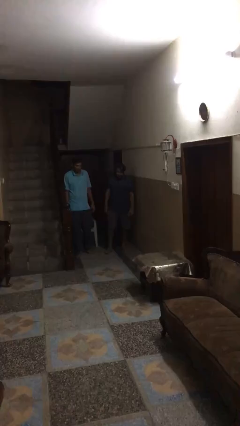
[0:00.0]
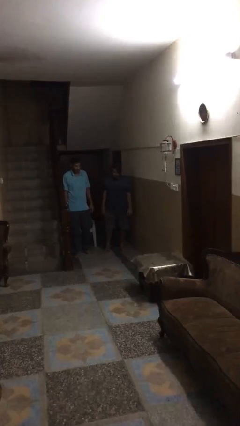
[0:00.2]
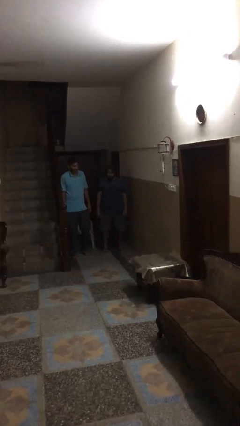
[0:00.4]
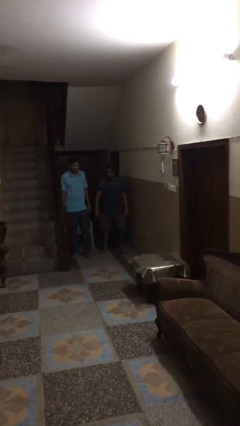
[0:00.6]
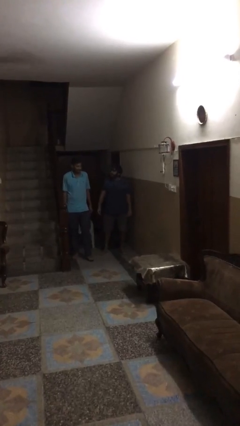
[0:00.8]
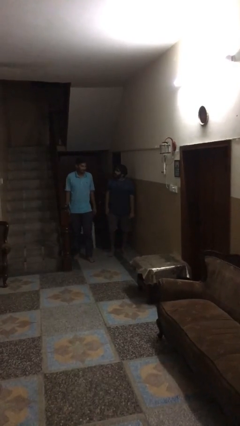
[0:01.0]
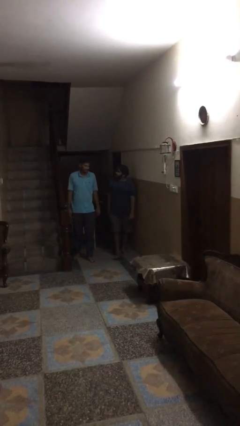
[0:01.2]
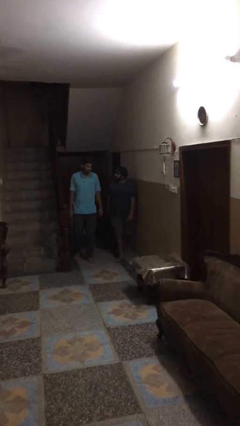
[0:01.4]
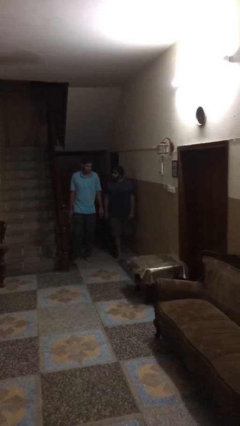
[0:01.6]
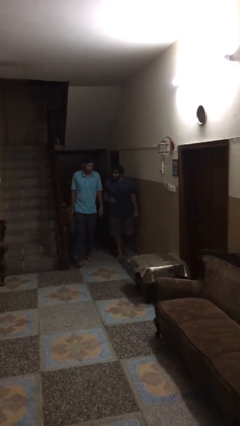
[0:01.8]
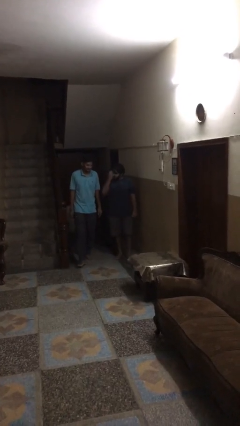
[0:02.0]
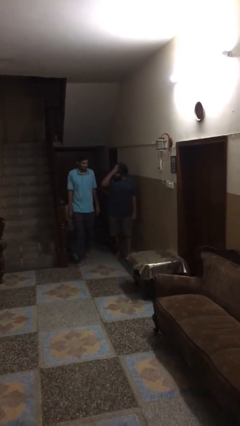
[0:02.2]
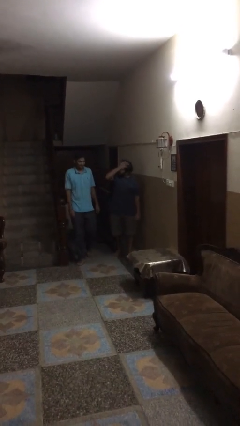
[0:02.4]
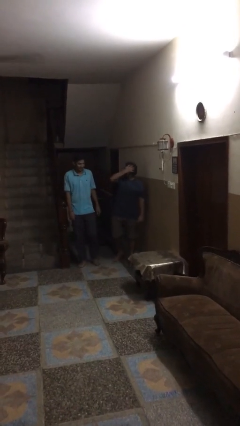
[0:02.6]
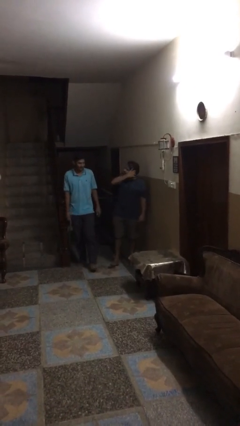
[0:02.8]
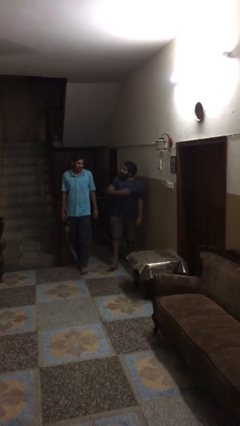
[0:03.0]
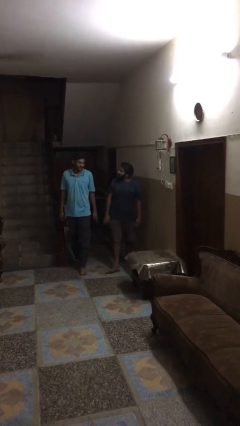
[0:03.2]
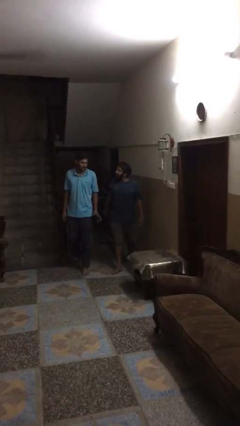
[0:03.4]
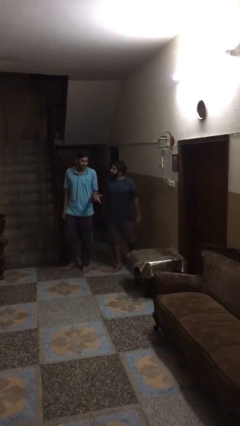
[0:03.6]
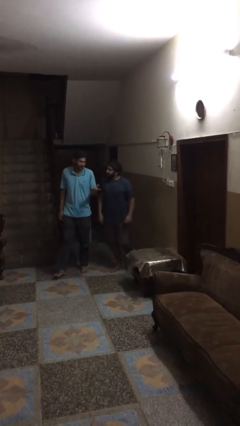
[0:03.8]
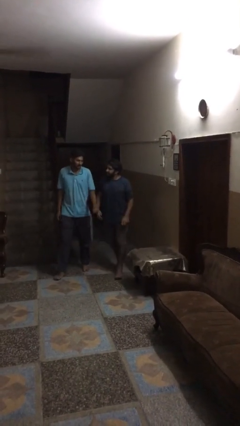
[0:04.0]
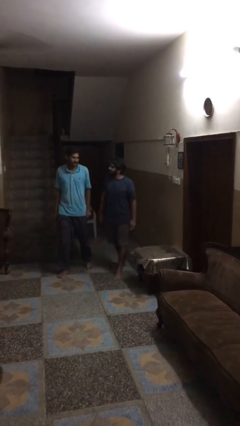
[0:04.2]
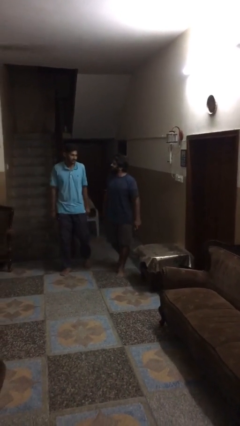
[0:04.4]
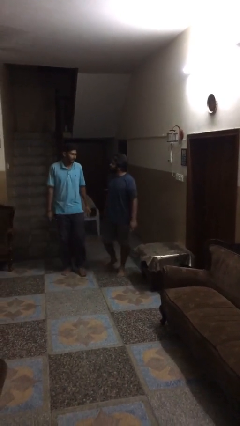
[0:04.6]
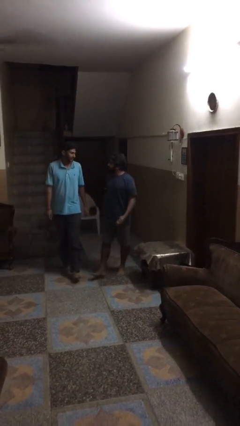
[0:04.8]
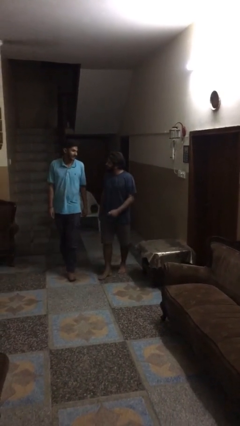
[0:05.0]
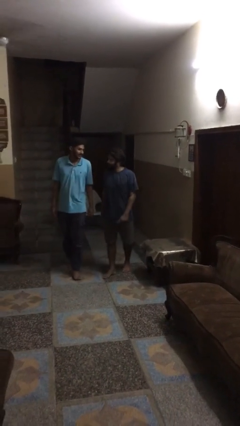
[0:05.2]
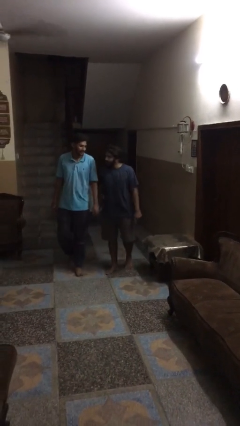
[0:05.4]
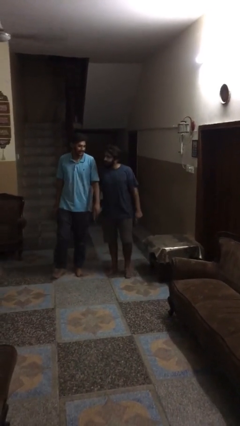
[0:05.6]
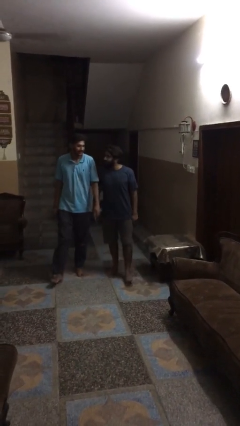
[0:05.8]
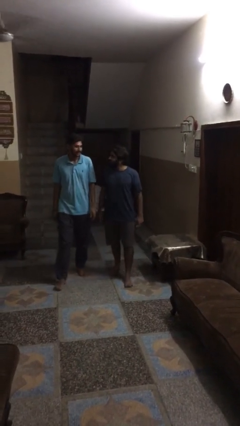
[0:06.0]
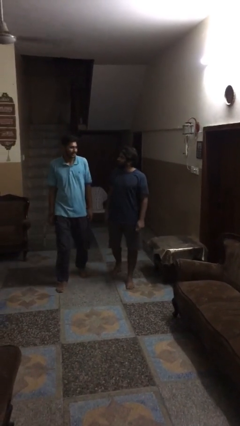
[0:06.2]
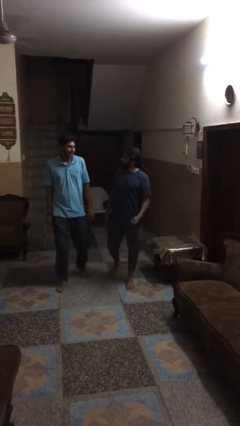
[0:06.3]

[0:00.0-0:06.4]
person talks to person

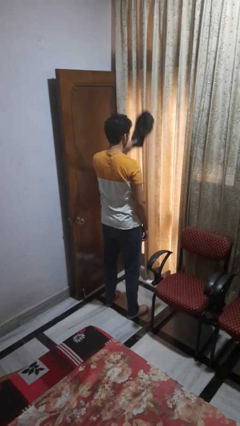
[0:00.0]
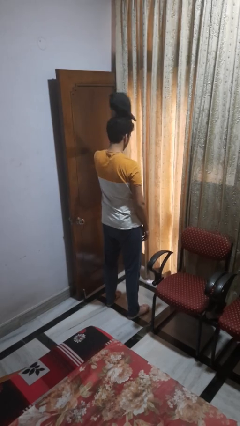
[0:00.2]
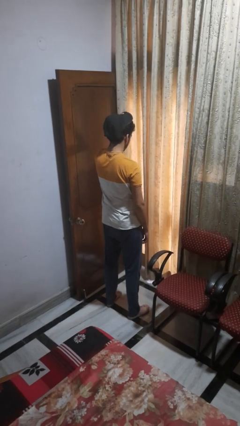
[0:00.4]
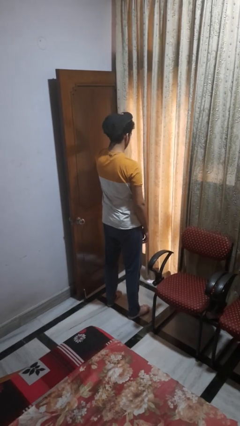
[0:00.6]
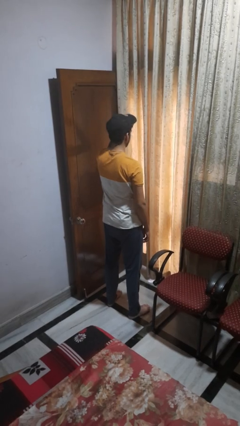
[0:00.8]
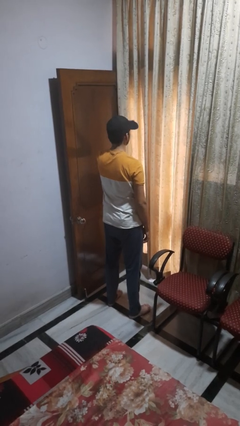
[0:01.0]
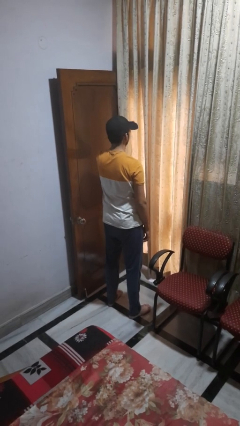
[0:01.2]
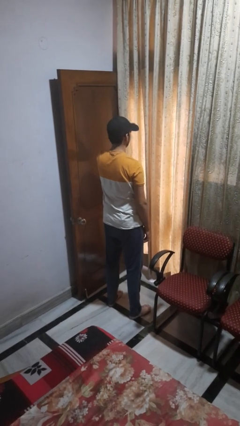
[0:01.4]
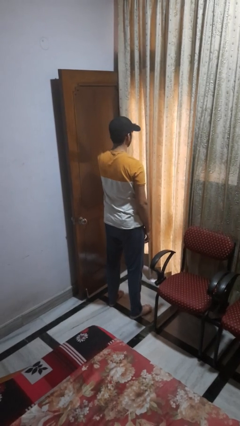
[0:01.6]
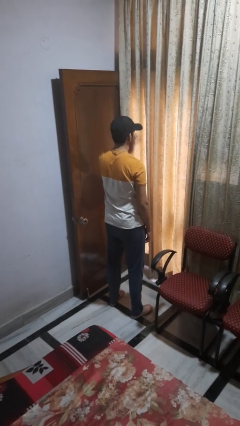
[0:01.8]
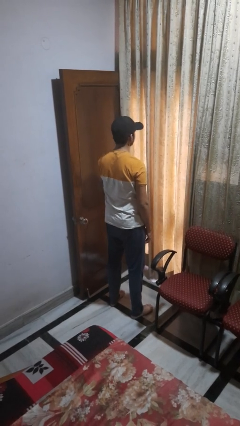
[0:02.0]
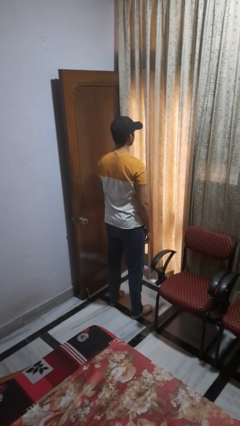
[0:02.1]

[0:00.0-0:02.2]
person puts on hat

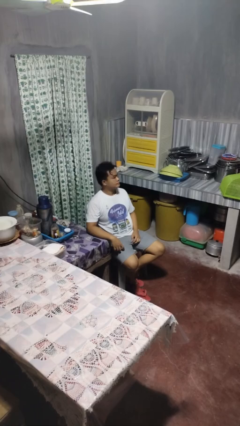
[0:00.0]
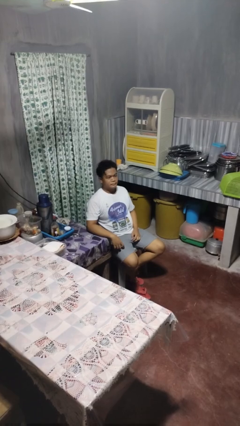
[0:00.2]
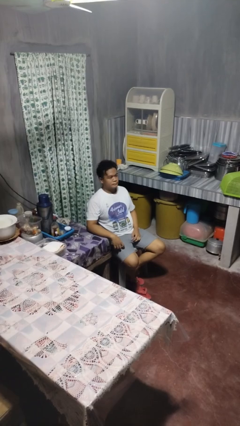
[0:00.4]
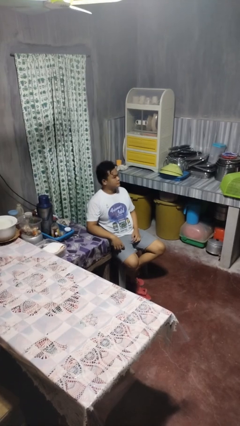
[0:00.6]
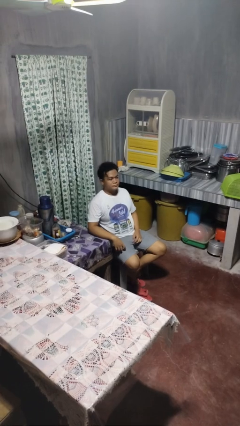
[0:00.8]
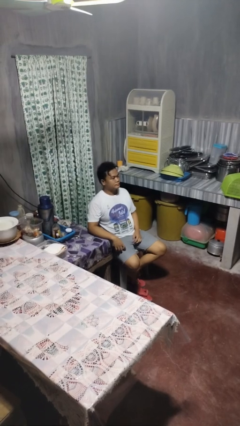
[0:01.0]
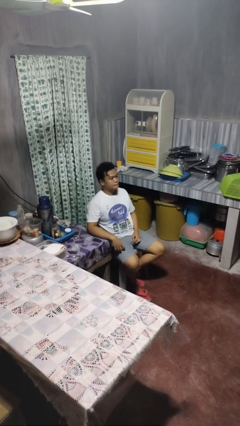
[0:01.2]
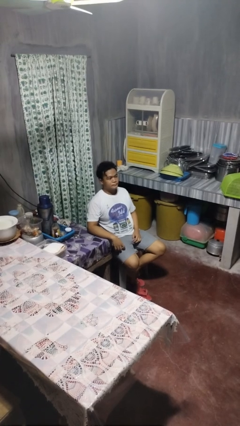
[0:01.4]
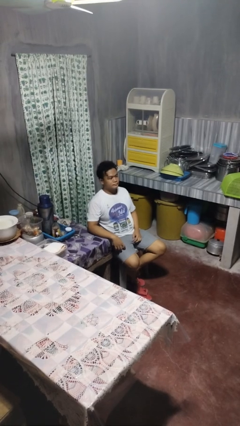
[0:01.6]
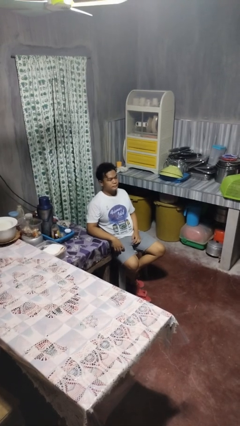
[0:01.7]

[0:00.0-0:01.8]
person shakes head

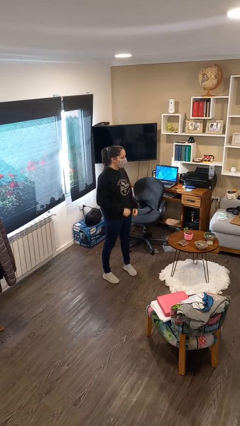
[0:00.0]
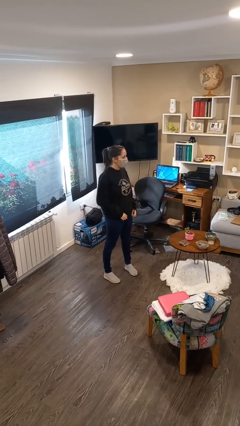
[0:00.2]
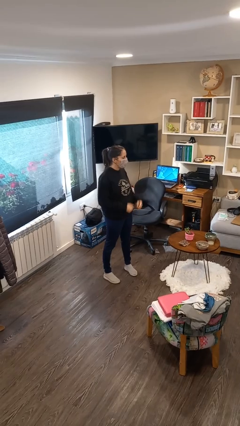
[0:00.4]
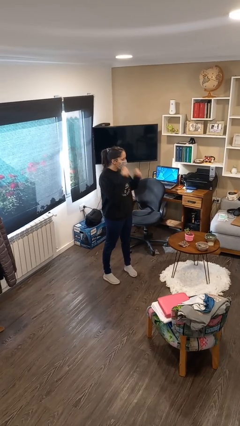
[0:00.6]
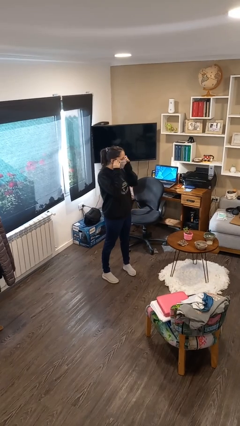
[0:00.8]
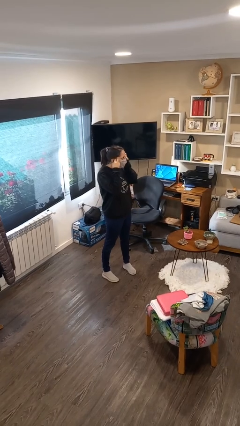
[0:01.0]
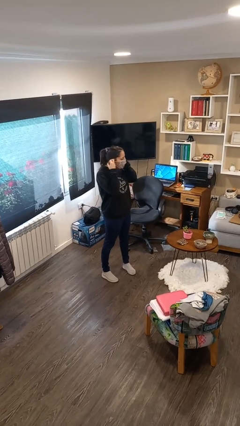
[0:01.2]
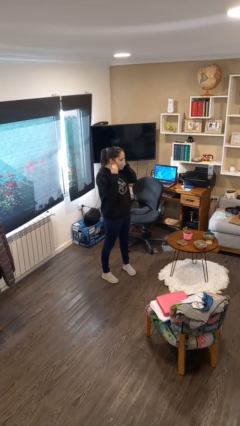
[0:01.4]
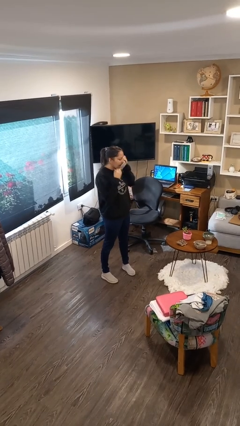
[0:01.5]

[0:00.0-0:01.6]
person takes off facemask

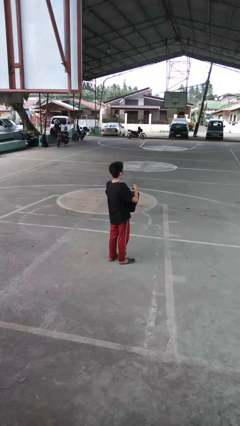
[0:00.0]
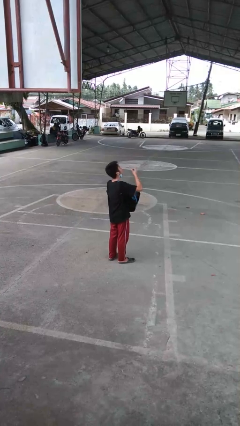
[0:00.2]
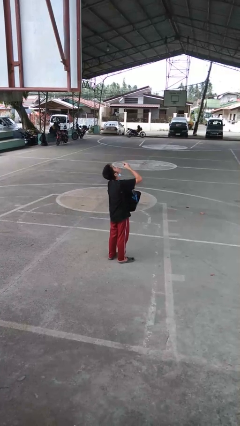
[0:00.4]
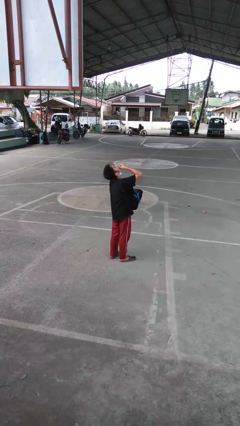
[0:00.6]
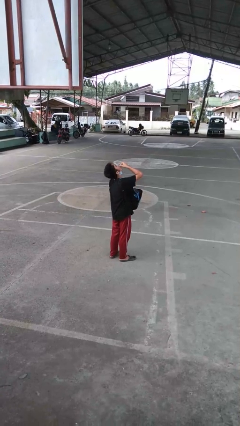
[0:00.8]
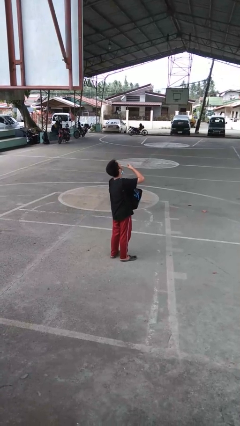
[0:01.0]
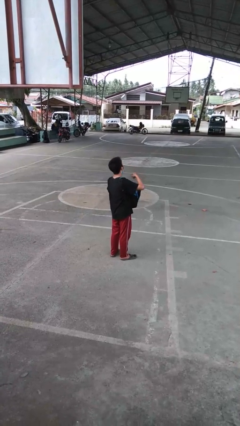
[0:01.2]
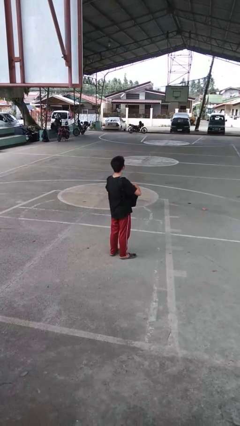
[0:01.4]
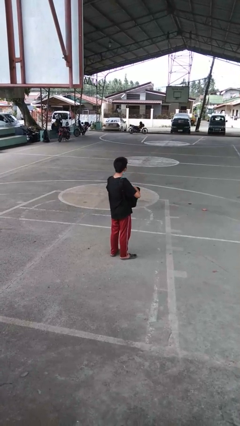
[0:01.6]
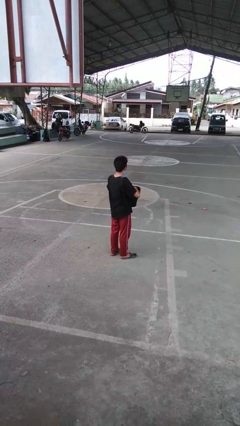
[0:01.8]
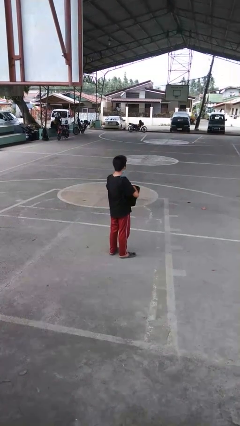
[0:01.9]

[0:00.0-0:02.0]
person eats snack from bag

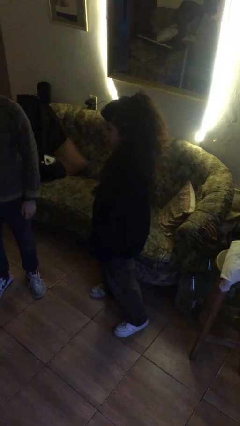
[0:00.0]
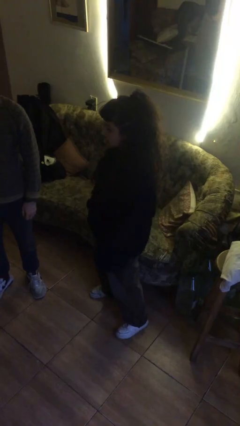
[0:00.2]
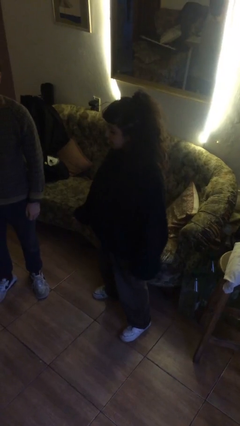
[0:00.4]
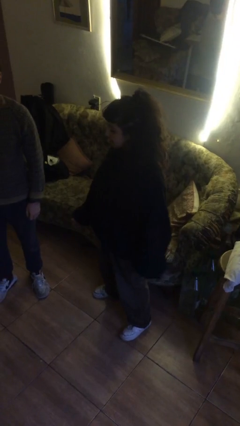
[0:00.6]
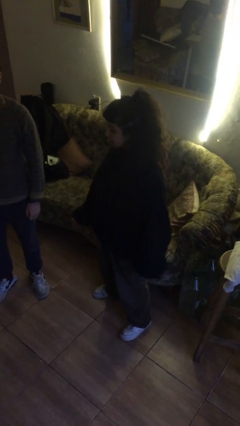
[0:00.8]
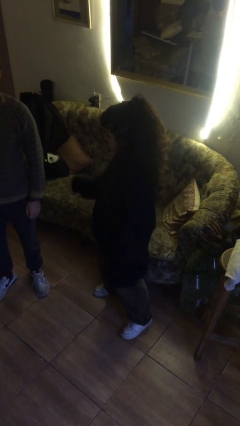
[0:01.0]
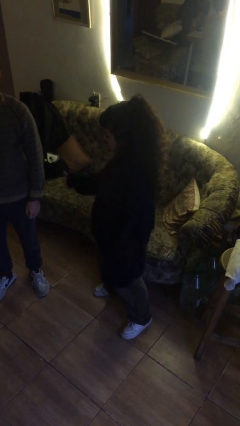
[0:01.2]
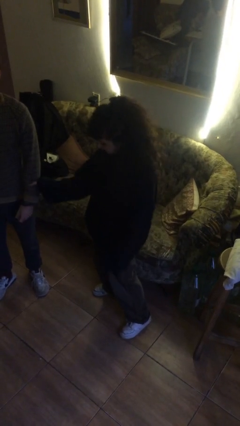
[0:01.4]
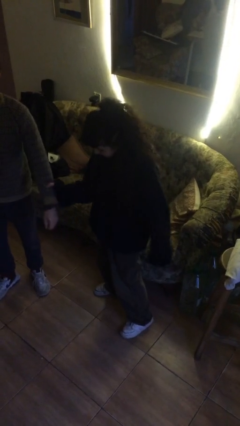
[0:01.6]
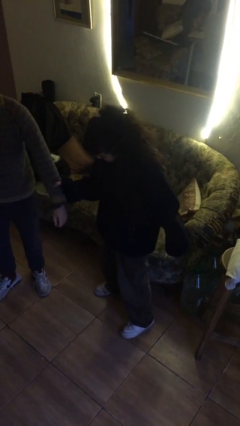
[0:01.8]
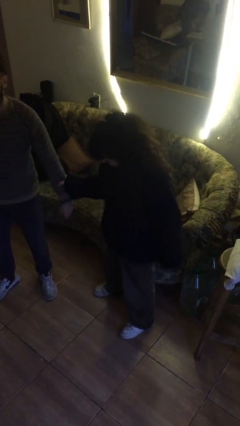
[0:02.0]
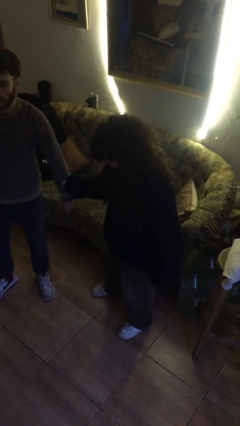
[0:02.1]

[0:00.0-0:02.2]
person grabs person by forearm

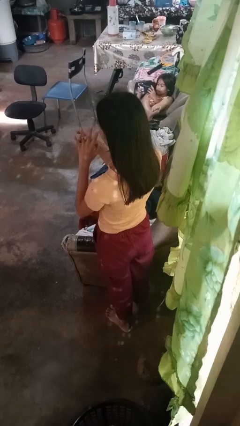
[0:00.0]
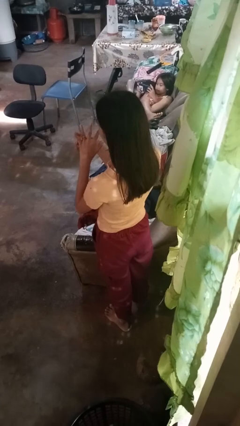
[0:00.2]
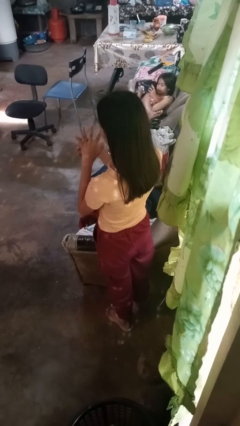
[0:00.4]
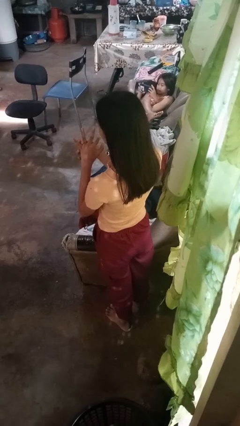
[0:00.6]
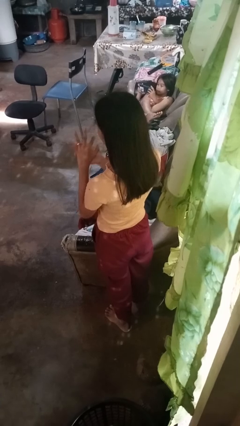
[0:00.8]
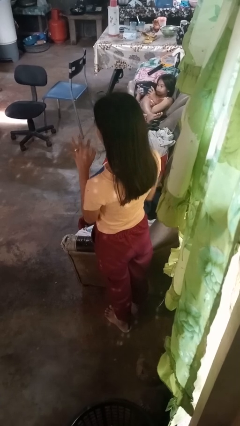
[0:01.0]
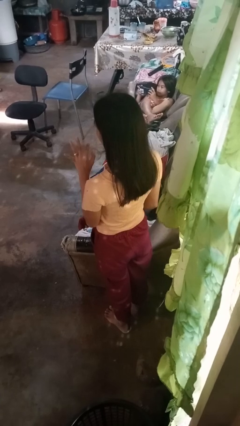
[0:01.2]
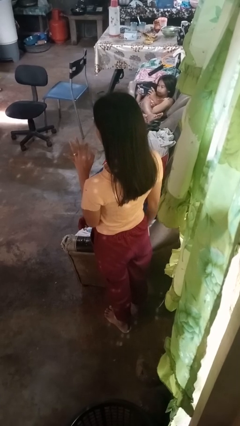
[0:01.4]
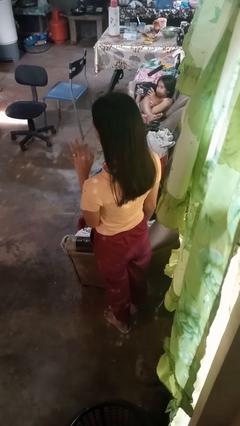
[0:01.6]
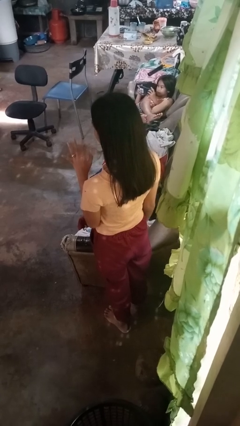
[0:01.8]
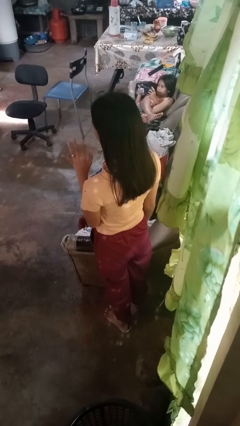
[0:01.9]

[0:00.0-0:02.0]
person puts on ring
